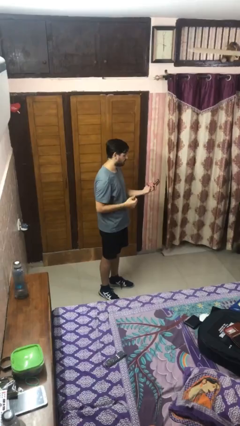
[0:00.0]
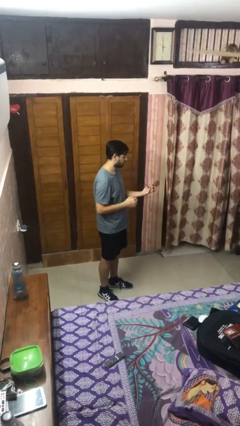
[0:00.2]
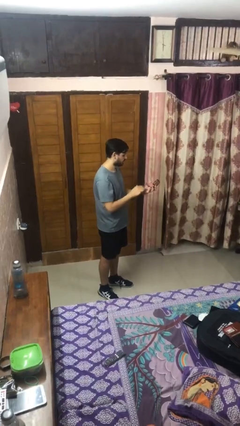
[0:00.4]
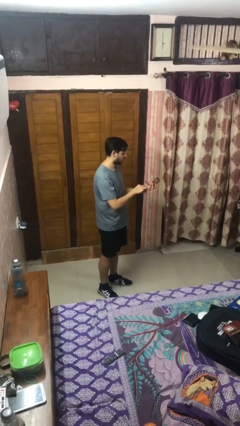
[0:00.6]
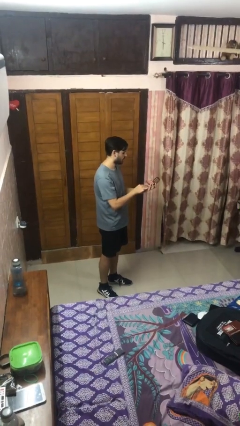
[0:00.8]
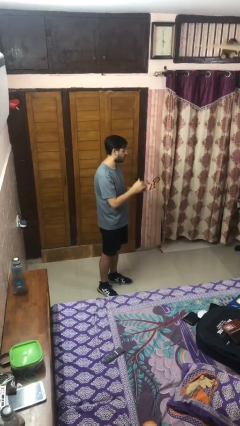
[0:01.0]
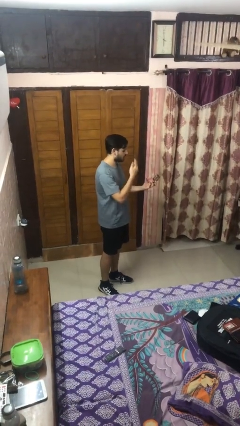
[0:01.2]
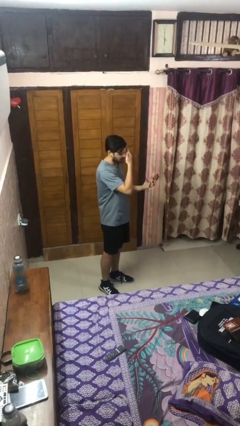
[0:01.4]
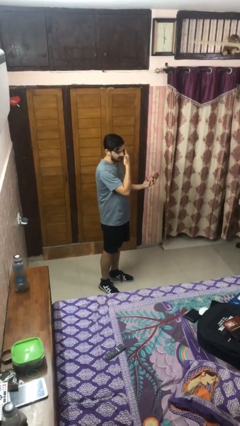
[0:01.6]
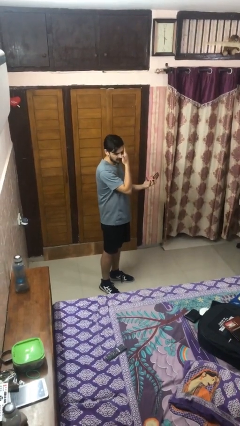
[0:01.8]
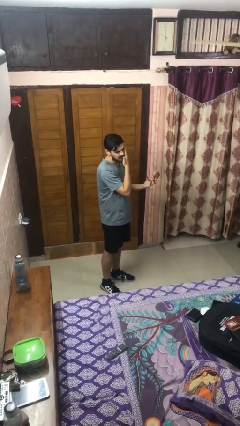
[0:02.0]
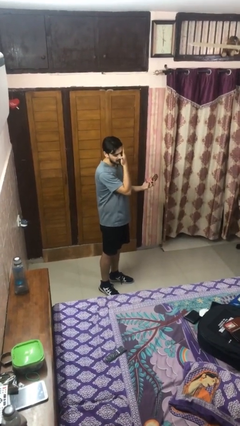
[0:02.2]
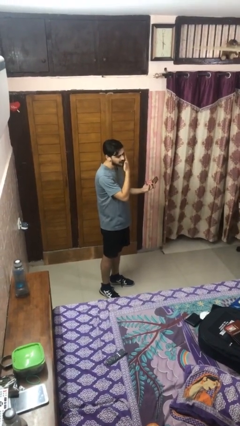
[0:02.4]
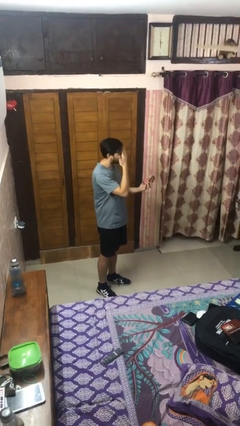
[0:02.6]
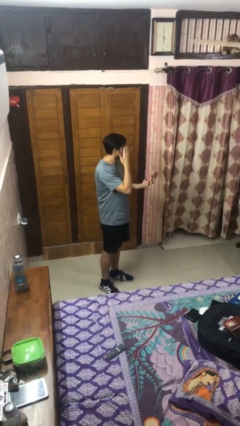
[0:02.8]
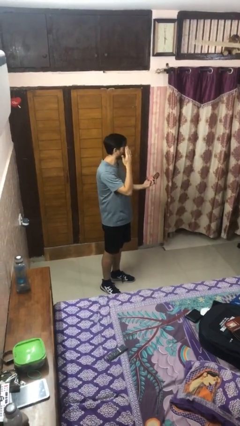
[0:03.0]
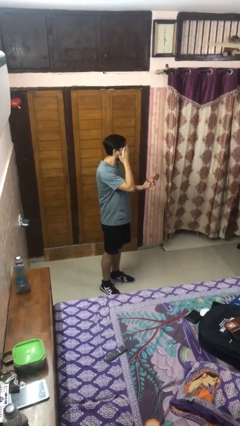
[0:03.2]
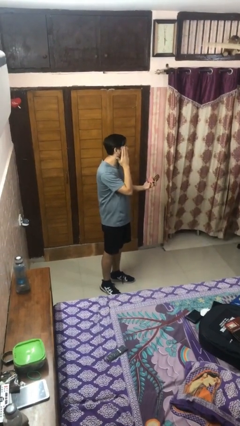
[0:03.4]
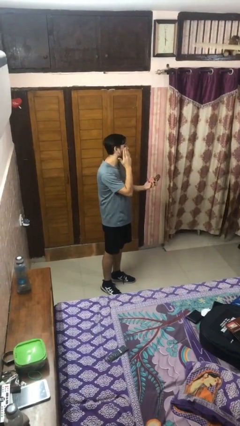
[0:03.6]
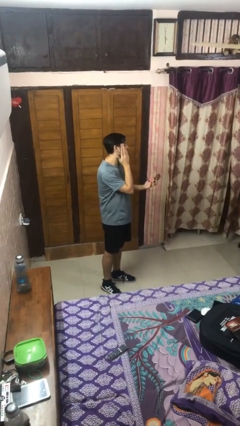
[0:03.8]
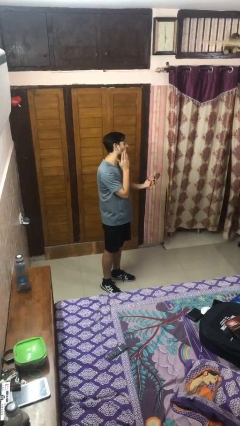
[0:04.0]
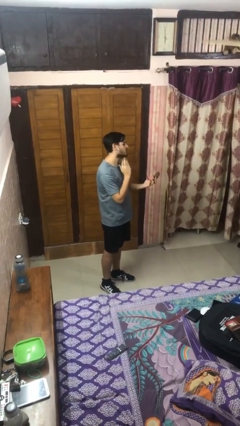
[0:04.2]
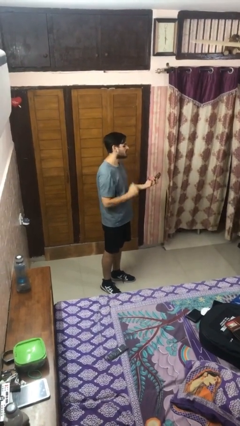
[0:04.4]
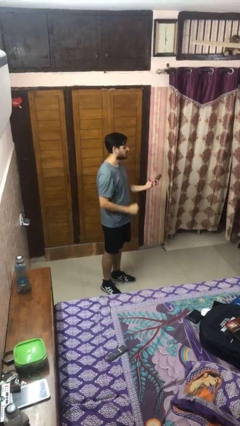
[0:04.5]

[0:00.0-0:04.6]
person applies foundation makeup

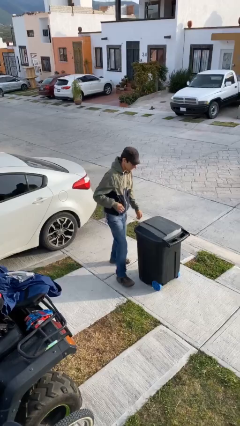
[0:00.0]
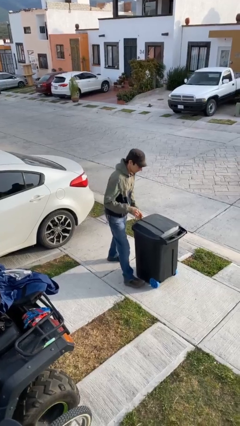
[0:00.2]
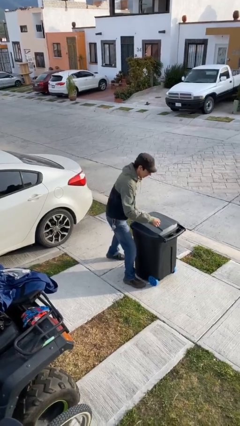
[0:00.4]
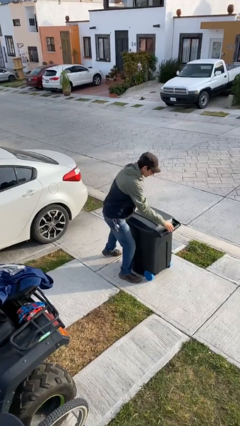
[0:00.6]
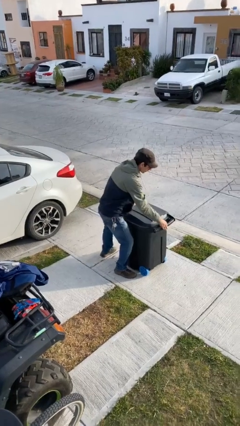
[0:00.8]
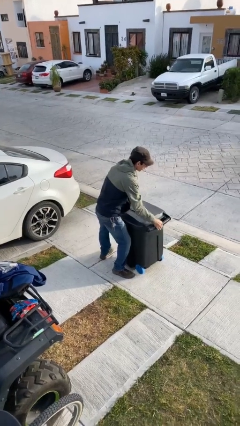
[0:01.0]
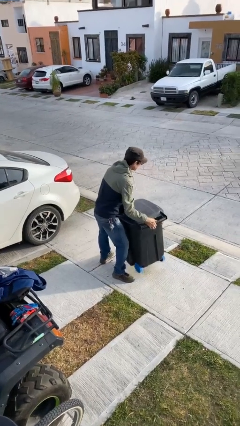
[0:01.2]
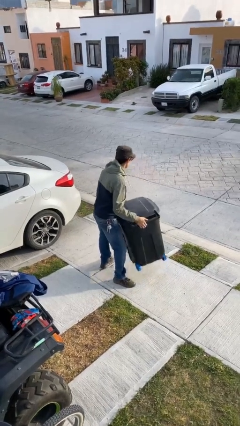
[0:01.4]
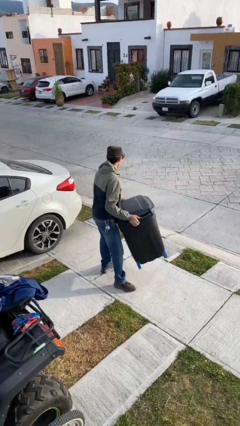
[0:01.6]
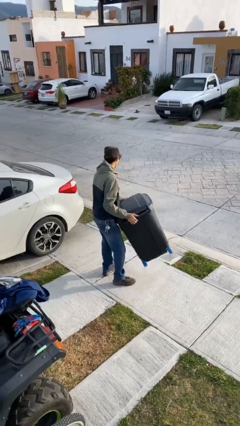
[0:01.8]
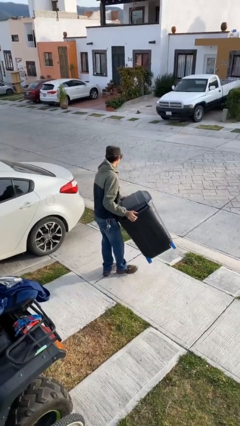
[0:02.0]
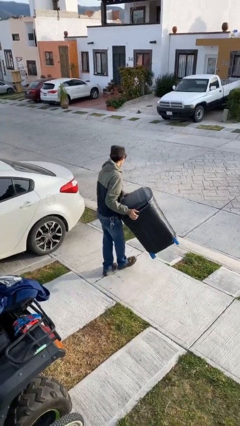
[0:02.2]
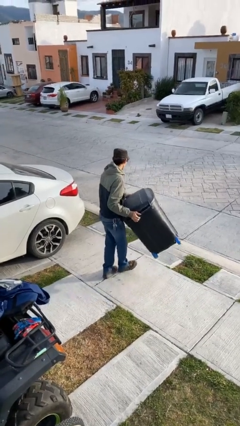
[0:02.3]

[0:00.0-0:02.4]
person picks up object from floor

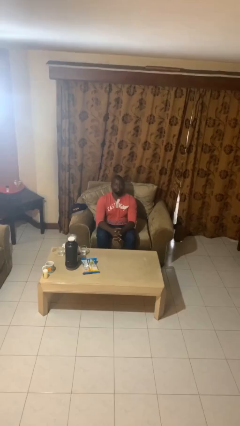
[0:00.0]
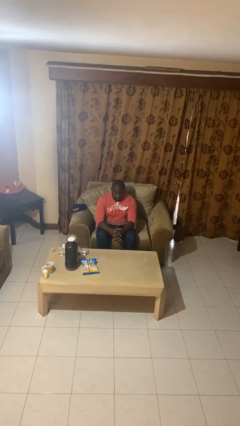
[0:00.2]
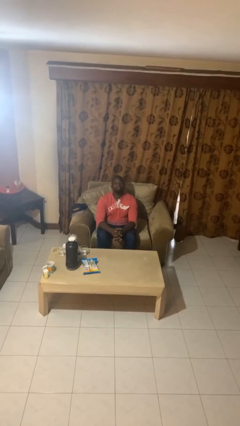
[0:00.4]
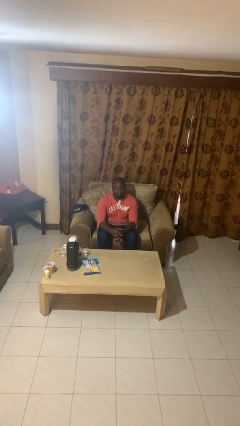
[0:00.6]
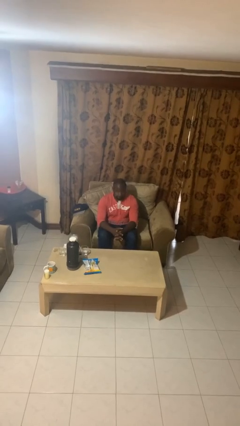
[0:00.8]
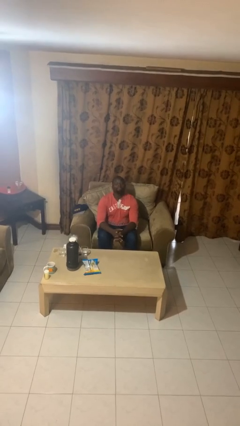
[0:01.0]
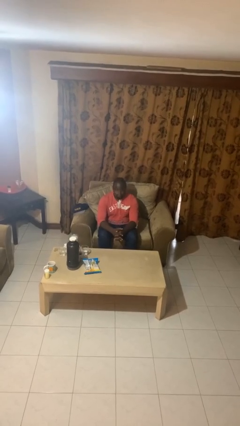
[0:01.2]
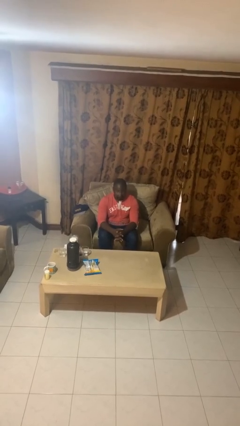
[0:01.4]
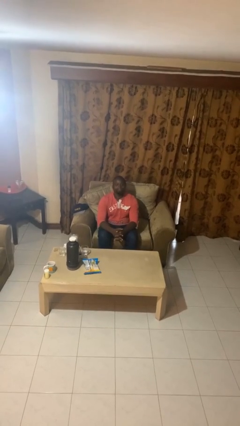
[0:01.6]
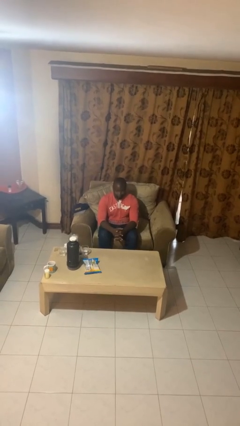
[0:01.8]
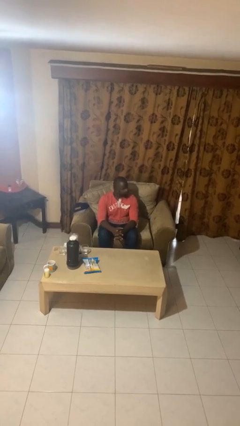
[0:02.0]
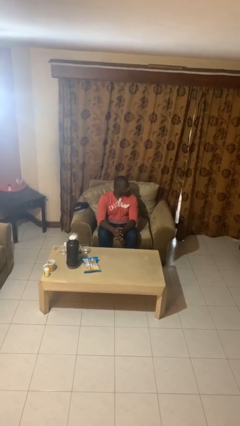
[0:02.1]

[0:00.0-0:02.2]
person nods head

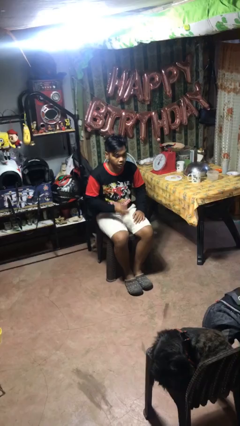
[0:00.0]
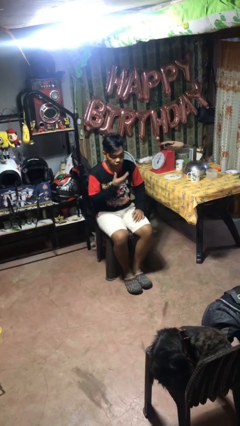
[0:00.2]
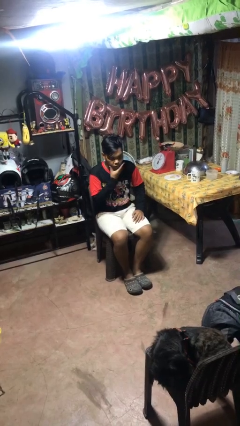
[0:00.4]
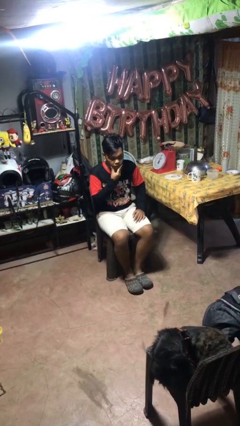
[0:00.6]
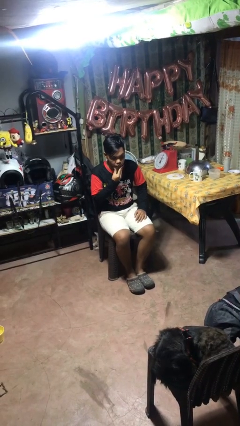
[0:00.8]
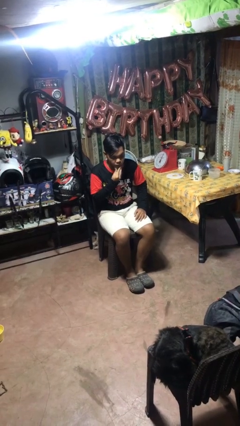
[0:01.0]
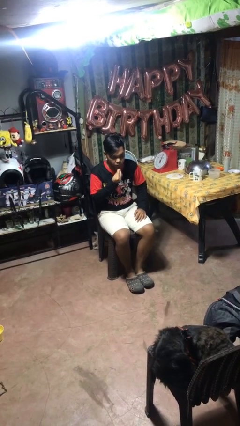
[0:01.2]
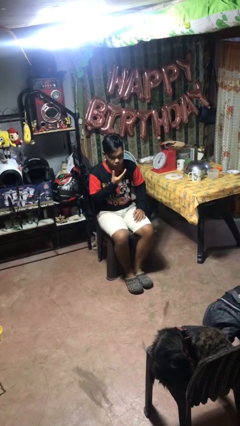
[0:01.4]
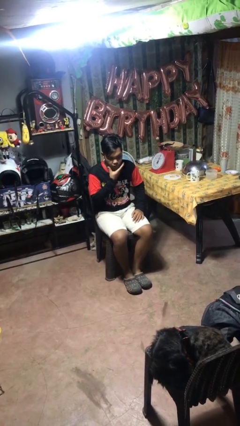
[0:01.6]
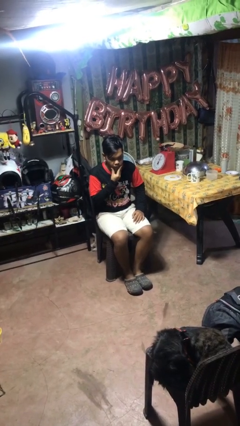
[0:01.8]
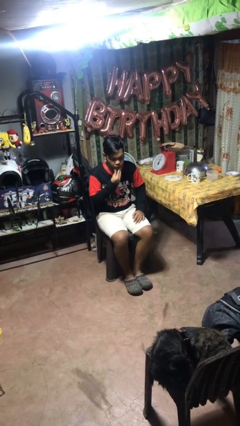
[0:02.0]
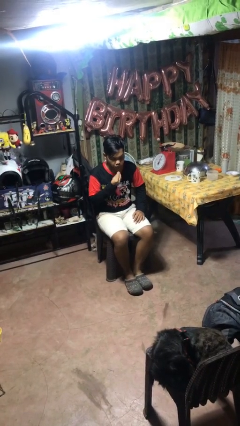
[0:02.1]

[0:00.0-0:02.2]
person strokes chin

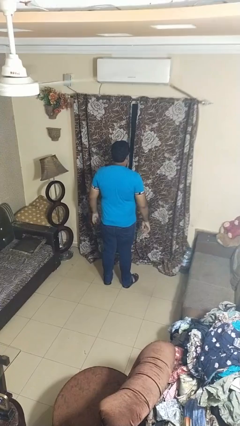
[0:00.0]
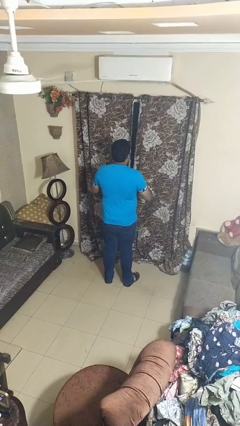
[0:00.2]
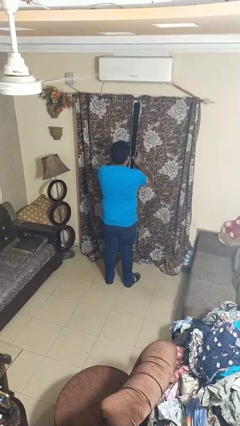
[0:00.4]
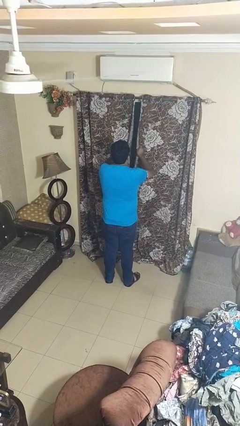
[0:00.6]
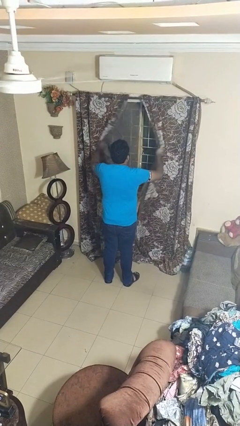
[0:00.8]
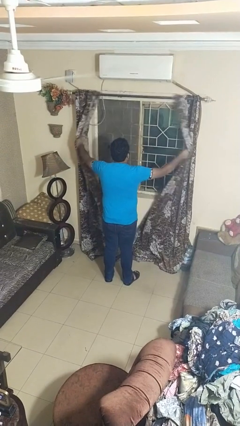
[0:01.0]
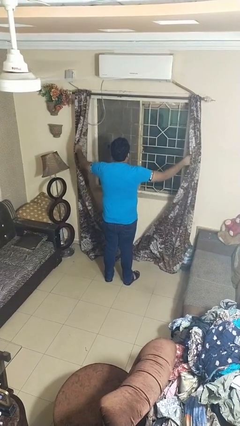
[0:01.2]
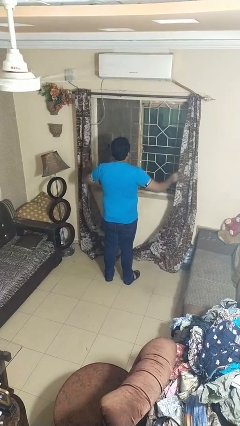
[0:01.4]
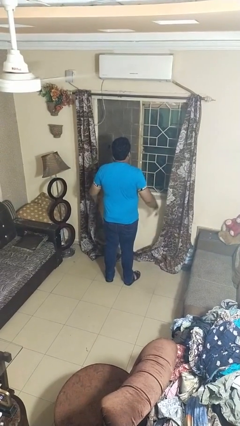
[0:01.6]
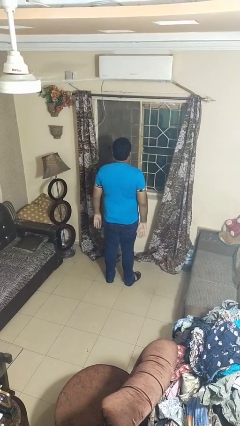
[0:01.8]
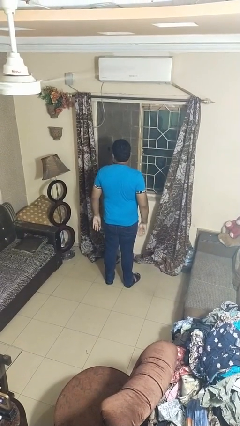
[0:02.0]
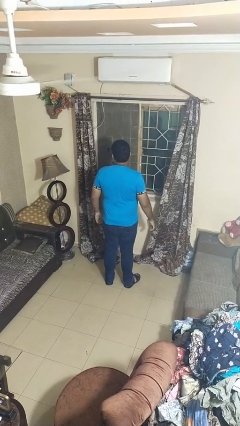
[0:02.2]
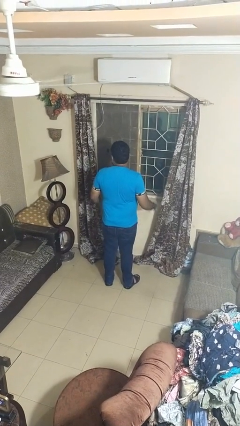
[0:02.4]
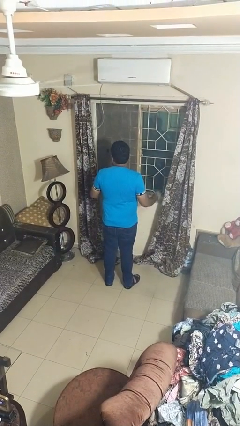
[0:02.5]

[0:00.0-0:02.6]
person opens curtains

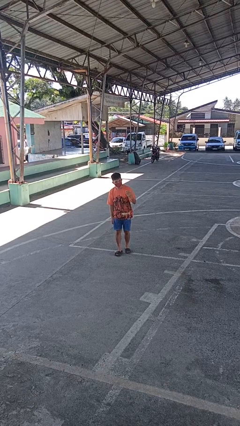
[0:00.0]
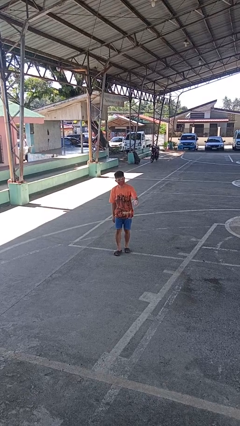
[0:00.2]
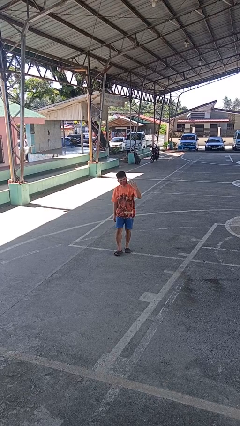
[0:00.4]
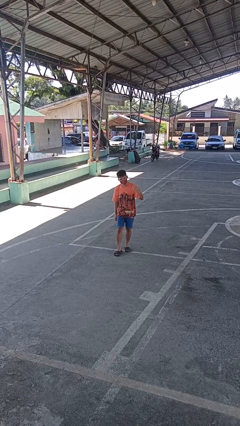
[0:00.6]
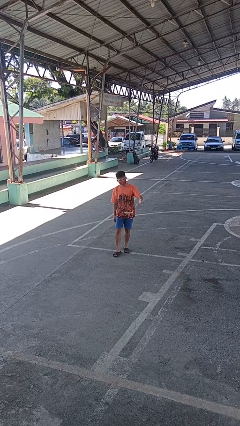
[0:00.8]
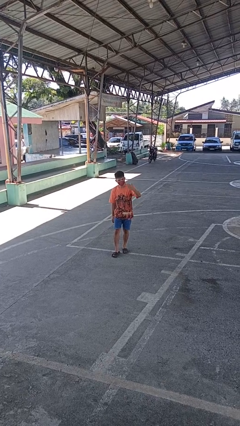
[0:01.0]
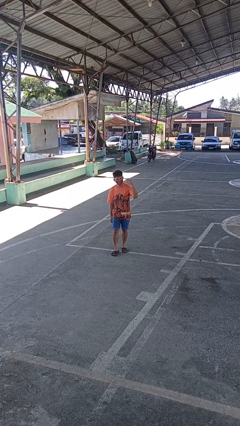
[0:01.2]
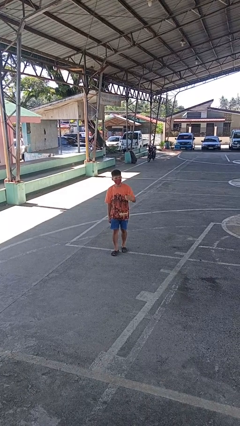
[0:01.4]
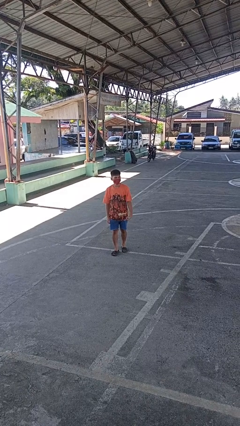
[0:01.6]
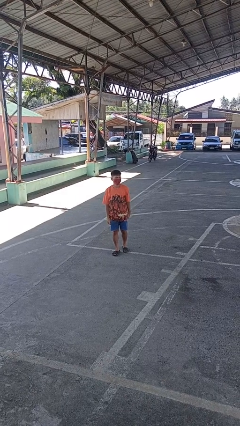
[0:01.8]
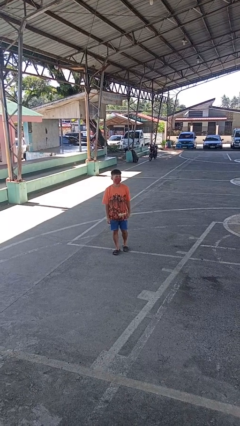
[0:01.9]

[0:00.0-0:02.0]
person gestures come here

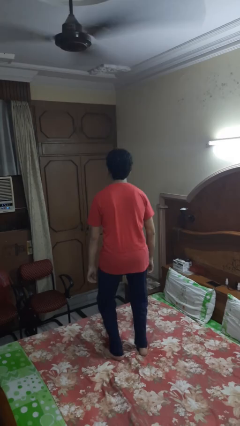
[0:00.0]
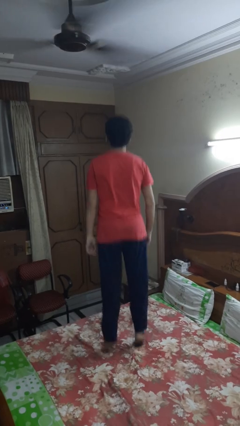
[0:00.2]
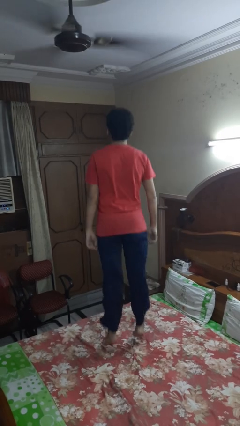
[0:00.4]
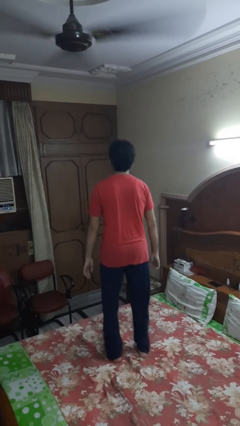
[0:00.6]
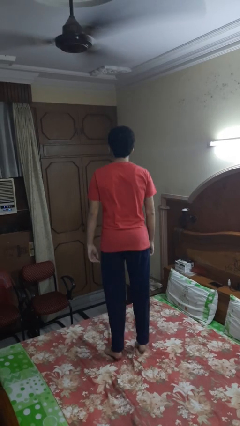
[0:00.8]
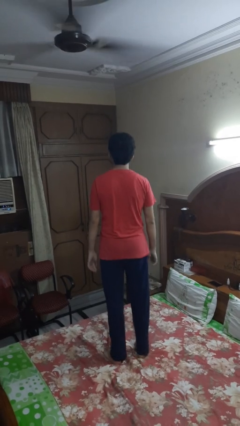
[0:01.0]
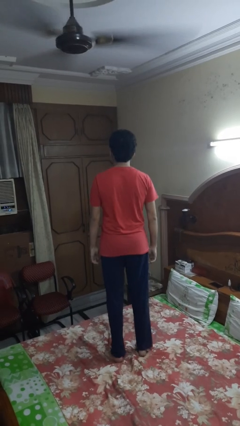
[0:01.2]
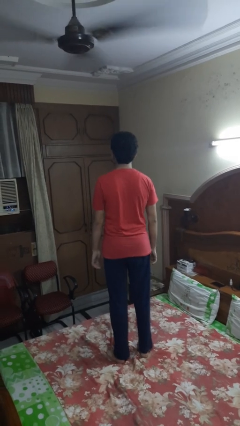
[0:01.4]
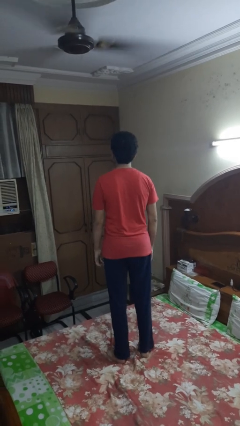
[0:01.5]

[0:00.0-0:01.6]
person jumps on bed
